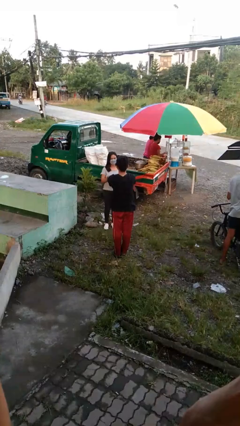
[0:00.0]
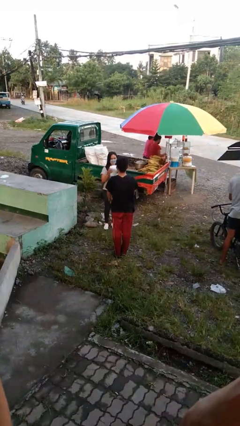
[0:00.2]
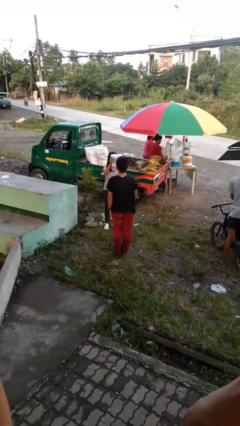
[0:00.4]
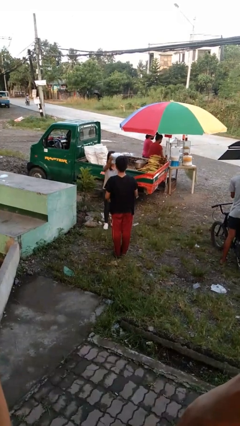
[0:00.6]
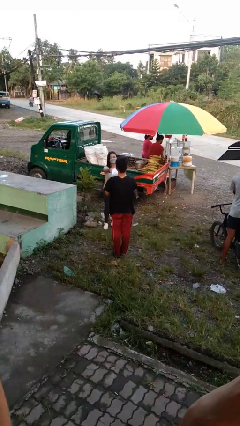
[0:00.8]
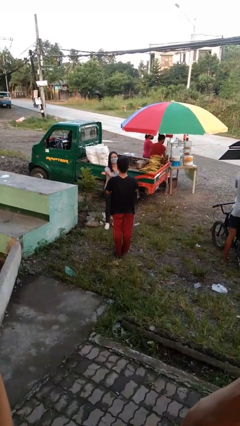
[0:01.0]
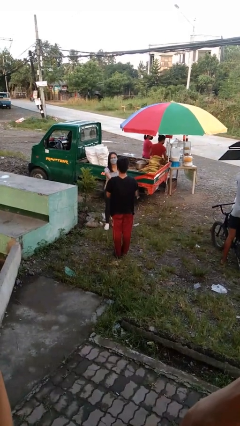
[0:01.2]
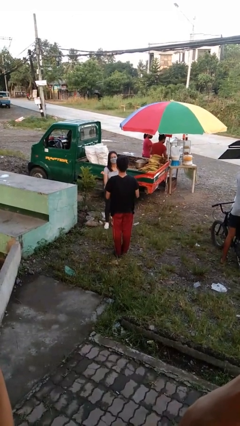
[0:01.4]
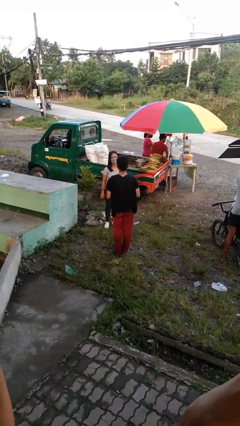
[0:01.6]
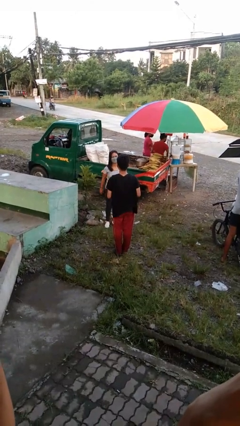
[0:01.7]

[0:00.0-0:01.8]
person transfers object to person

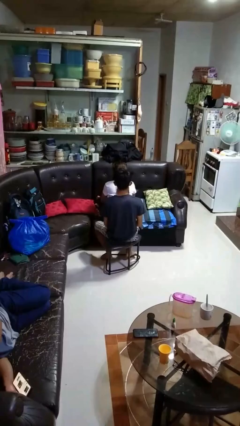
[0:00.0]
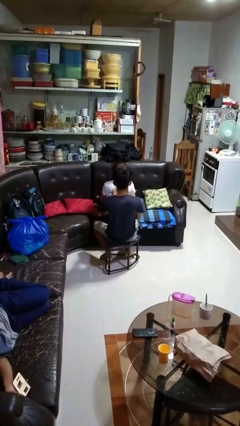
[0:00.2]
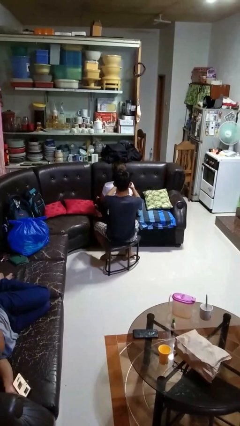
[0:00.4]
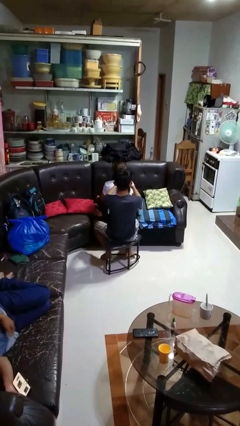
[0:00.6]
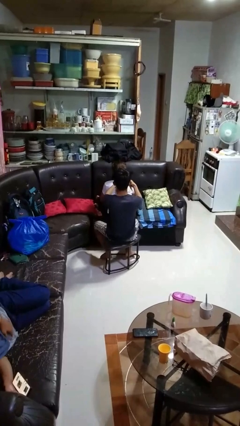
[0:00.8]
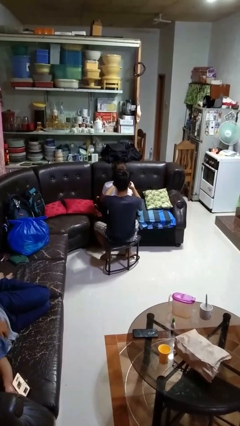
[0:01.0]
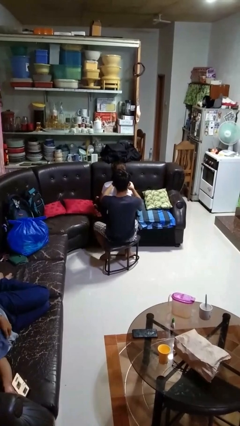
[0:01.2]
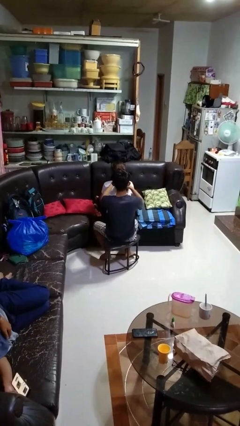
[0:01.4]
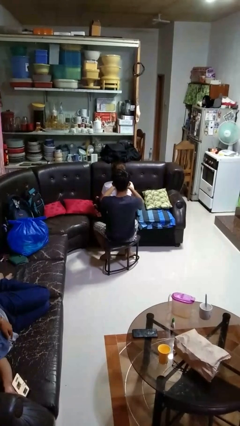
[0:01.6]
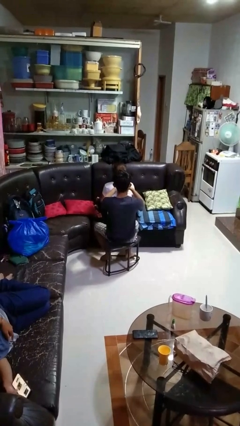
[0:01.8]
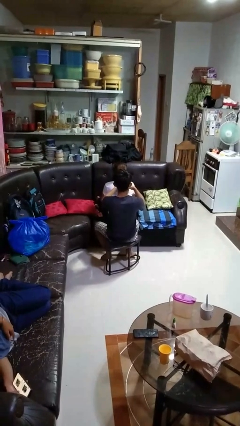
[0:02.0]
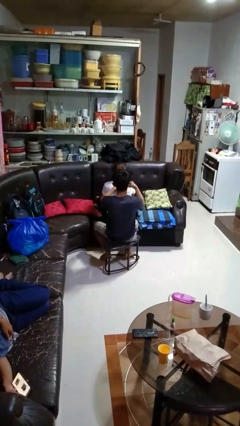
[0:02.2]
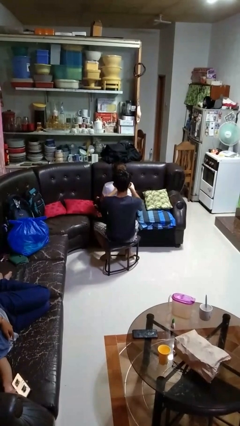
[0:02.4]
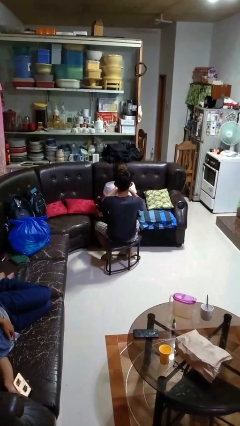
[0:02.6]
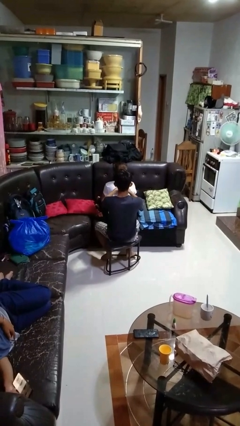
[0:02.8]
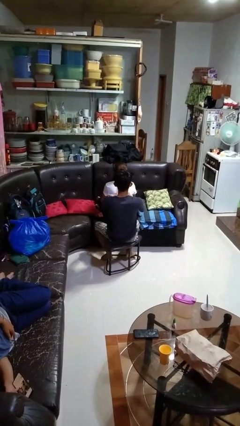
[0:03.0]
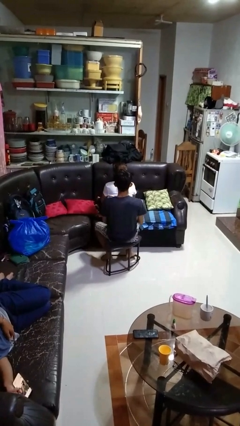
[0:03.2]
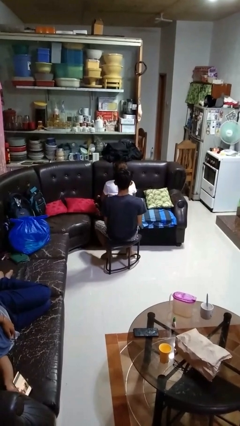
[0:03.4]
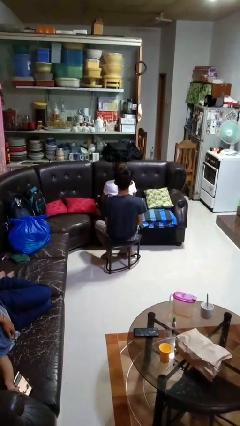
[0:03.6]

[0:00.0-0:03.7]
person braids hair of person

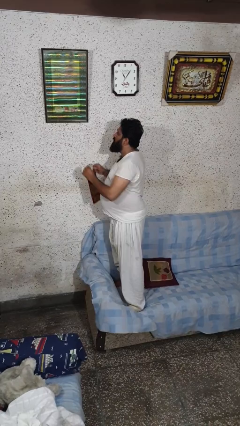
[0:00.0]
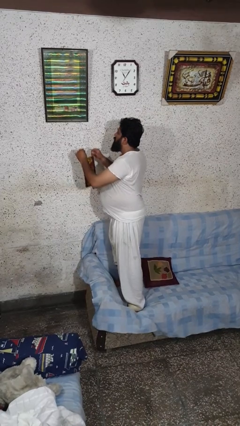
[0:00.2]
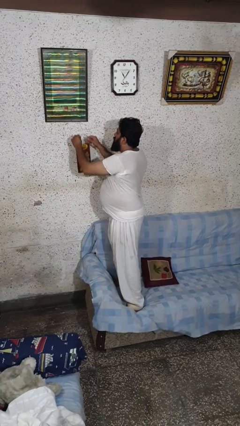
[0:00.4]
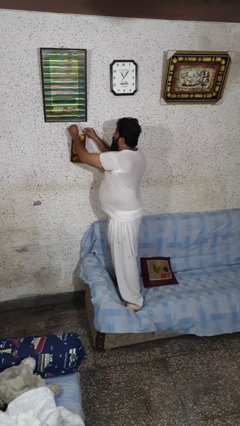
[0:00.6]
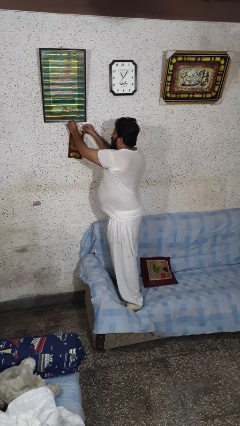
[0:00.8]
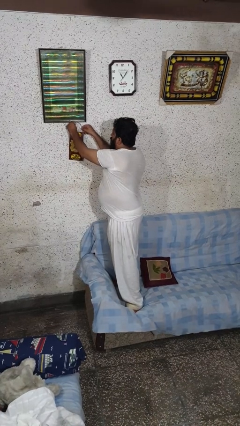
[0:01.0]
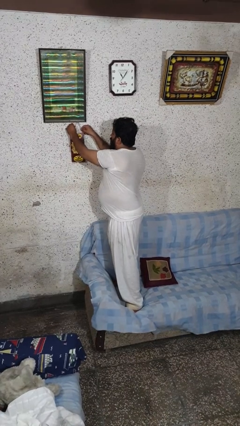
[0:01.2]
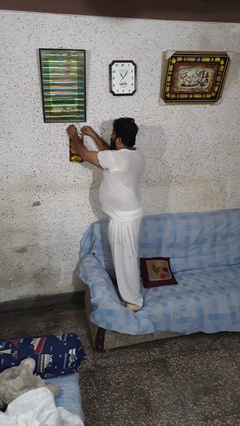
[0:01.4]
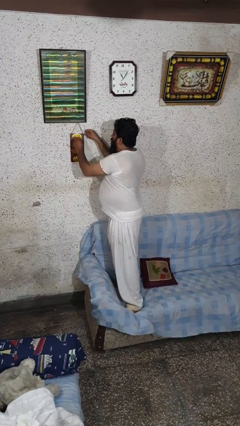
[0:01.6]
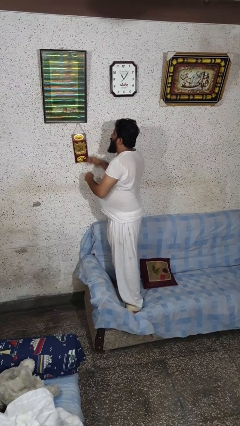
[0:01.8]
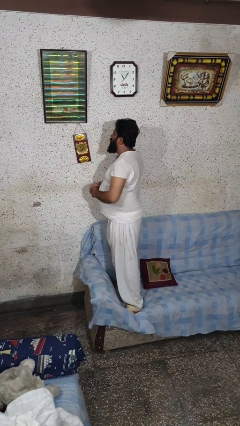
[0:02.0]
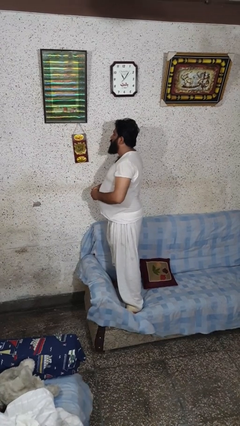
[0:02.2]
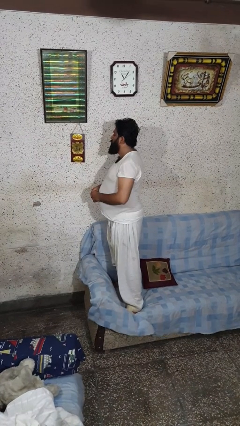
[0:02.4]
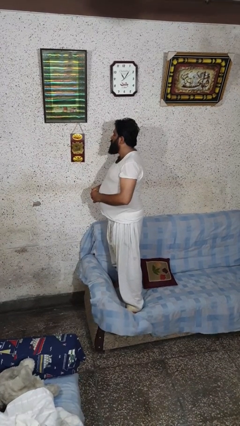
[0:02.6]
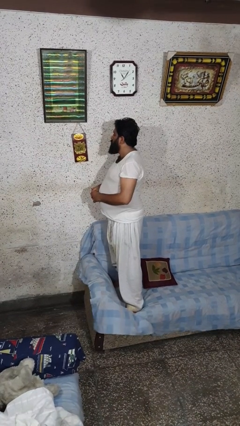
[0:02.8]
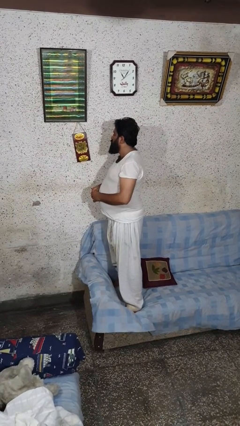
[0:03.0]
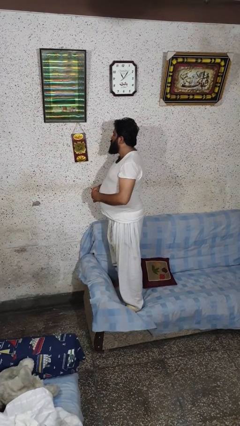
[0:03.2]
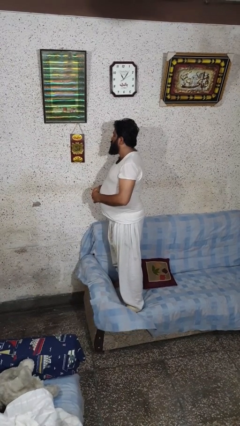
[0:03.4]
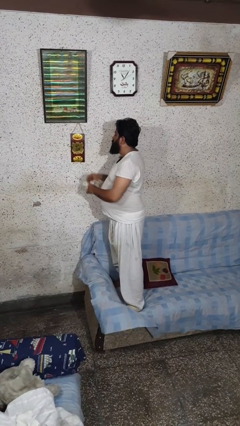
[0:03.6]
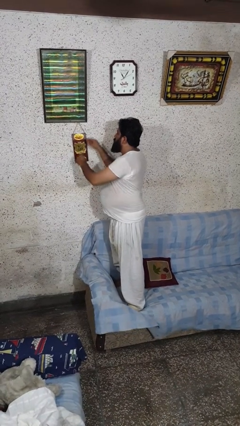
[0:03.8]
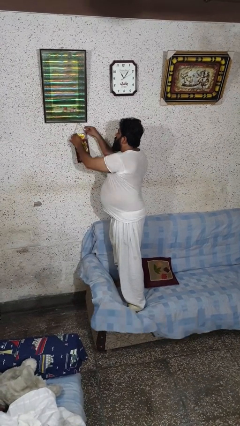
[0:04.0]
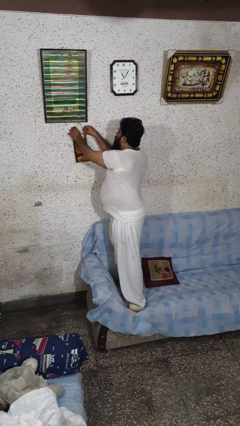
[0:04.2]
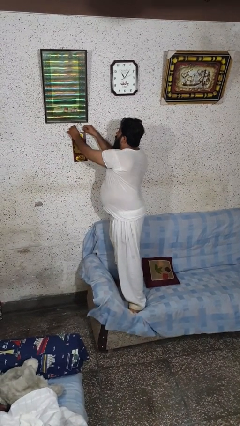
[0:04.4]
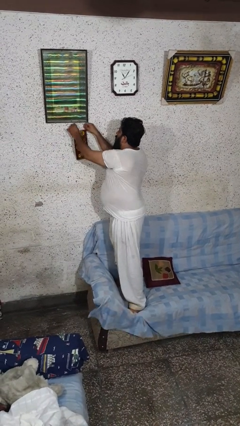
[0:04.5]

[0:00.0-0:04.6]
person puts up picture frame

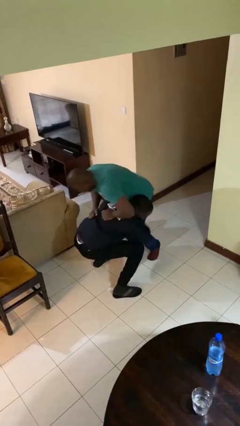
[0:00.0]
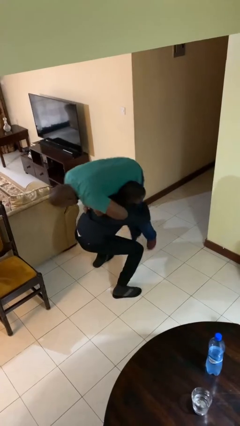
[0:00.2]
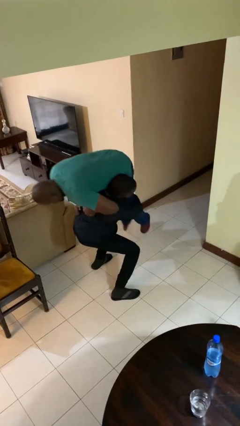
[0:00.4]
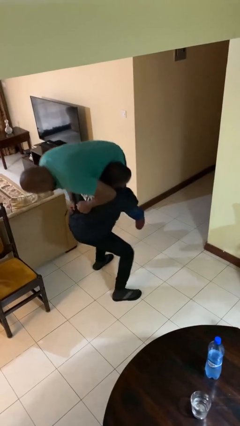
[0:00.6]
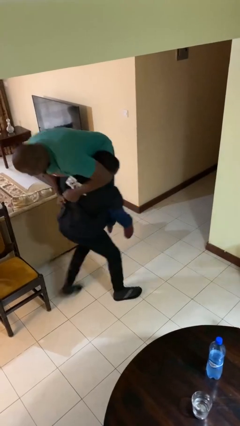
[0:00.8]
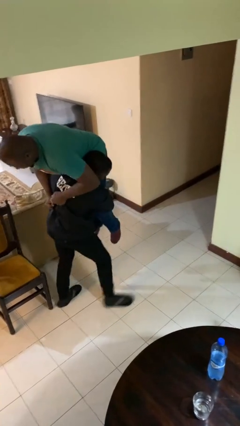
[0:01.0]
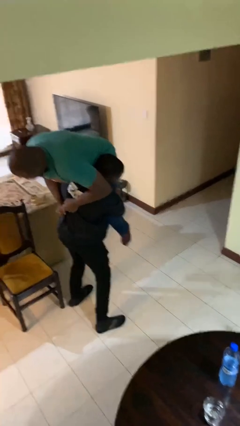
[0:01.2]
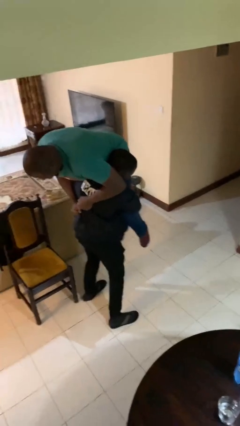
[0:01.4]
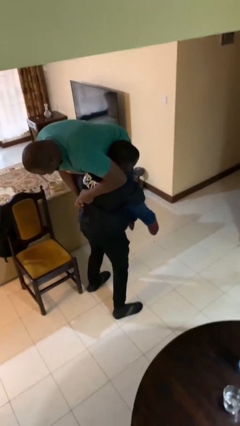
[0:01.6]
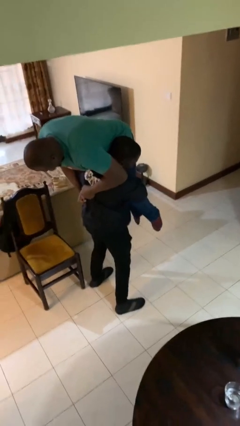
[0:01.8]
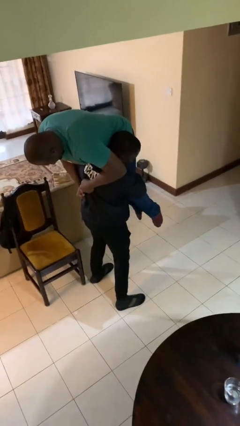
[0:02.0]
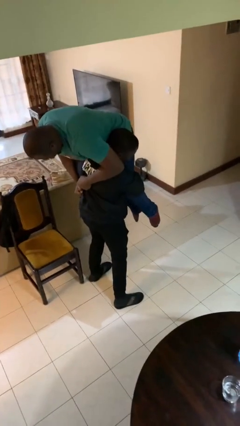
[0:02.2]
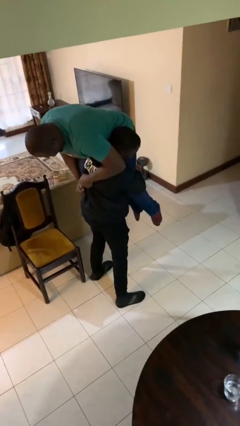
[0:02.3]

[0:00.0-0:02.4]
person carries person over shoulder

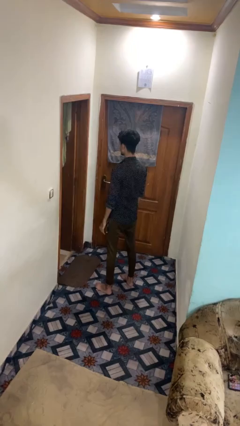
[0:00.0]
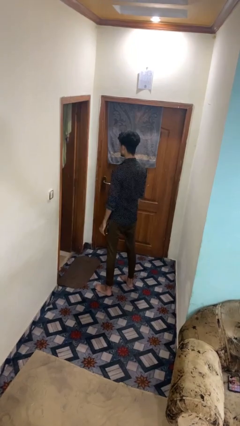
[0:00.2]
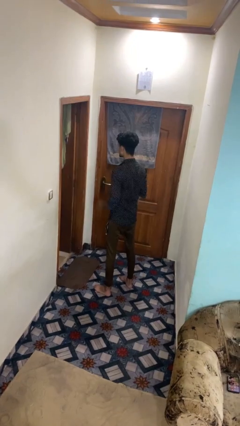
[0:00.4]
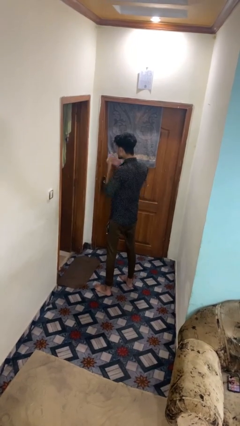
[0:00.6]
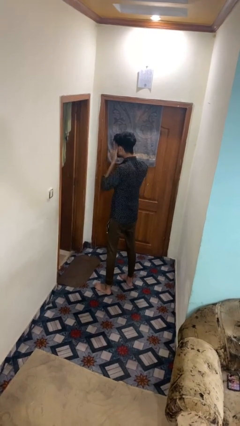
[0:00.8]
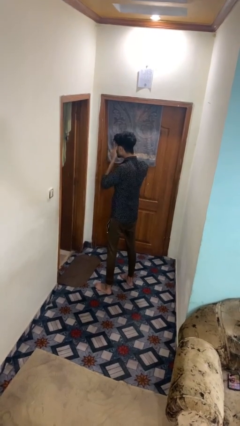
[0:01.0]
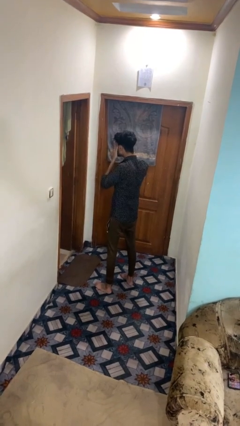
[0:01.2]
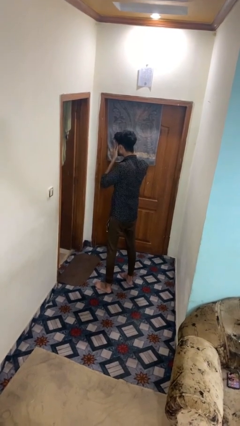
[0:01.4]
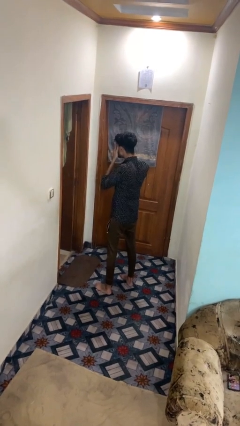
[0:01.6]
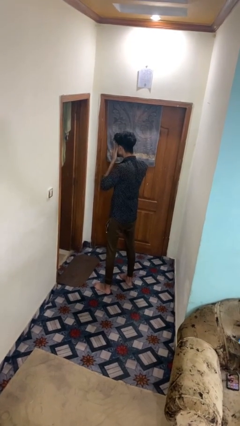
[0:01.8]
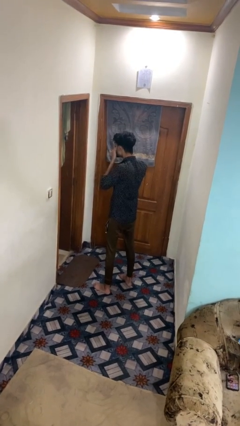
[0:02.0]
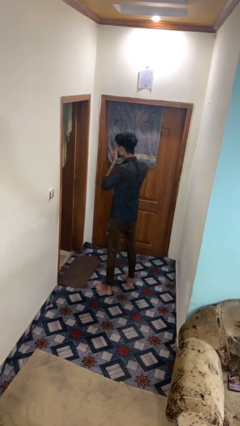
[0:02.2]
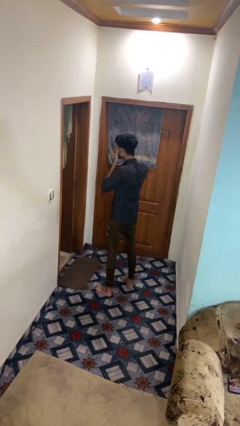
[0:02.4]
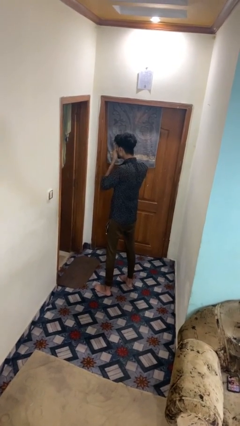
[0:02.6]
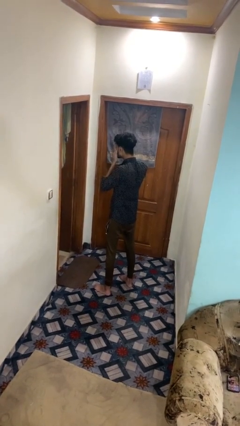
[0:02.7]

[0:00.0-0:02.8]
person rubs eyes

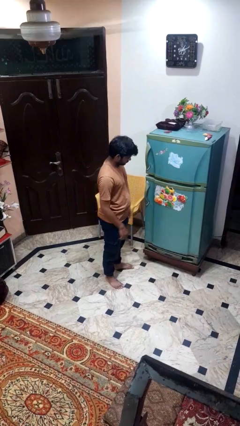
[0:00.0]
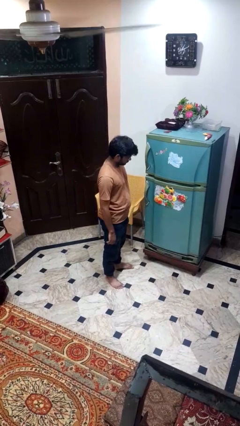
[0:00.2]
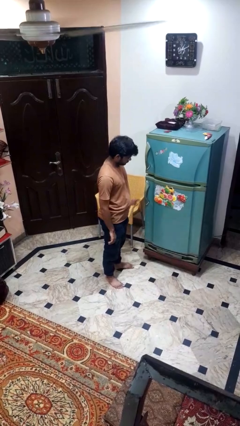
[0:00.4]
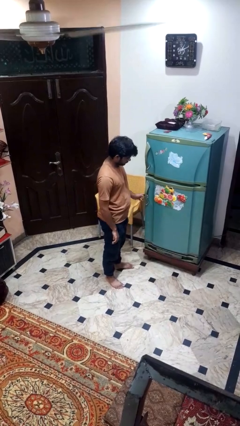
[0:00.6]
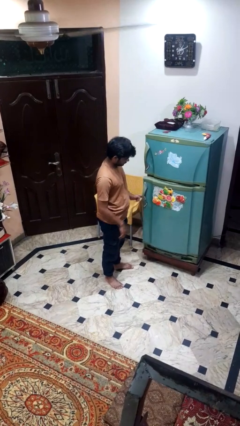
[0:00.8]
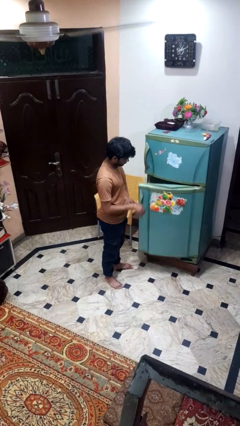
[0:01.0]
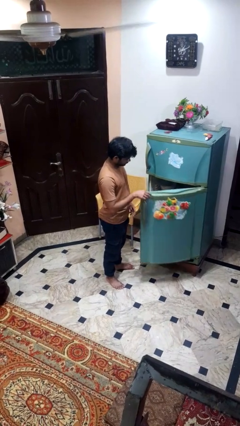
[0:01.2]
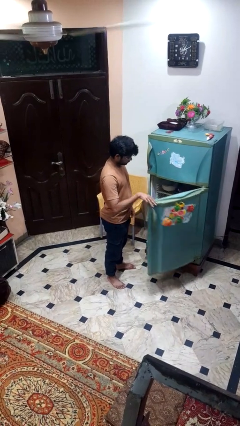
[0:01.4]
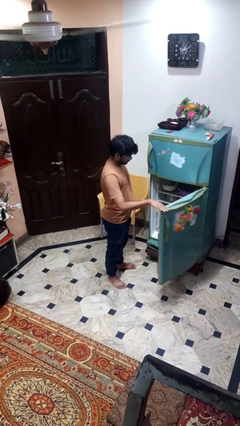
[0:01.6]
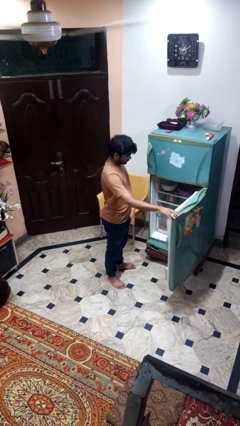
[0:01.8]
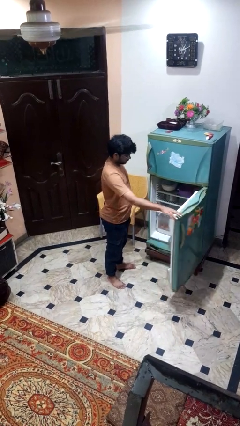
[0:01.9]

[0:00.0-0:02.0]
person opens refrigerator

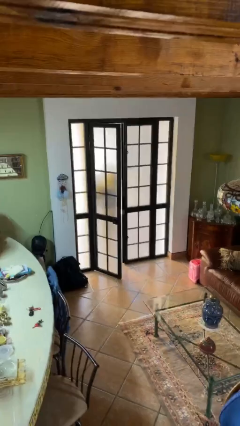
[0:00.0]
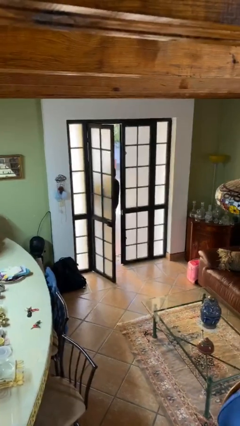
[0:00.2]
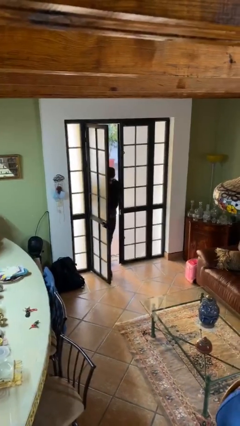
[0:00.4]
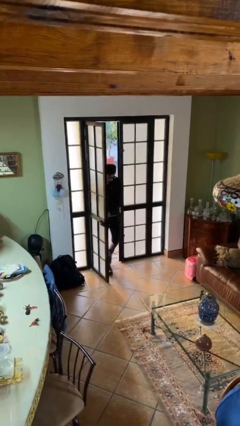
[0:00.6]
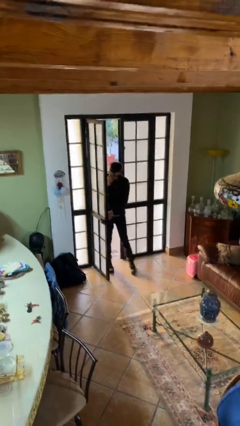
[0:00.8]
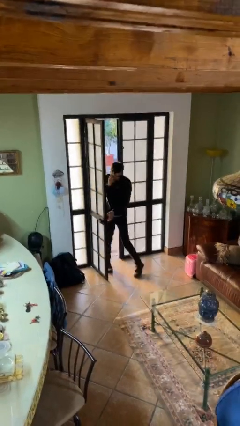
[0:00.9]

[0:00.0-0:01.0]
person opens facility door
